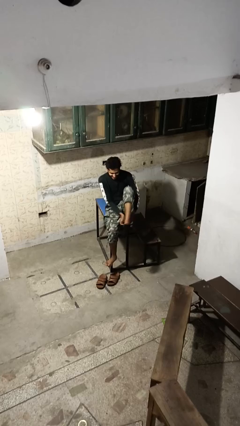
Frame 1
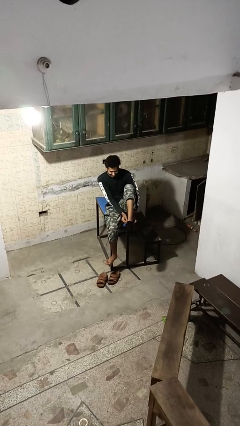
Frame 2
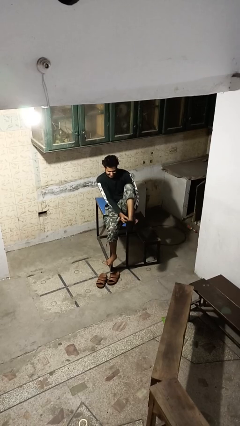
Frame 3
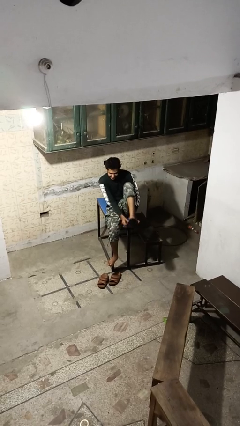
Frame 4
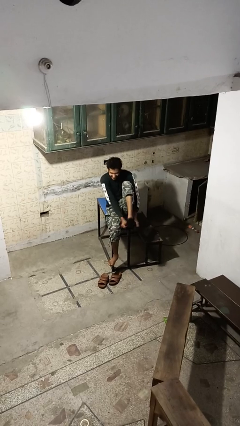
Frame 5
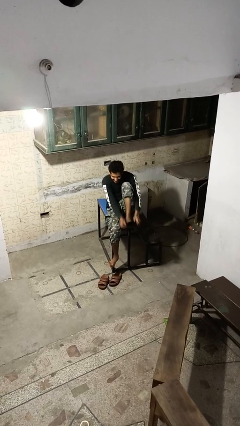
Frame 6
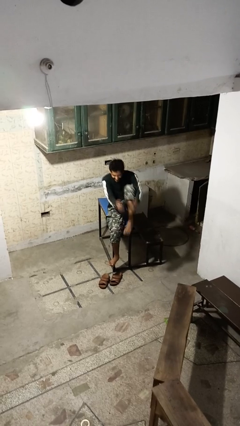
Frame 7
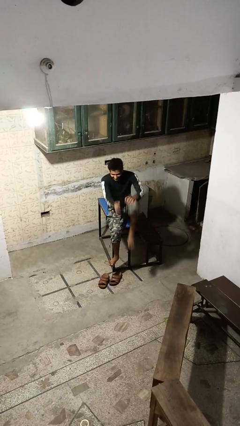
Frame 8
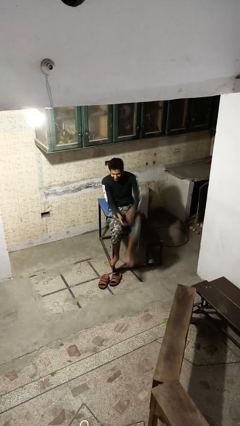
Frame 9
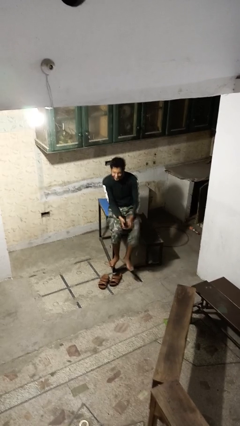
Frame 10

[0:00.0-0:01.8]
person takes off socks

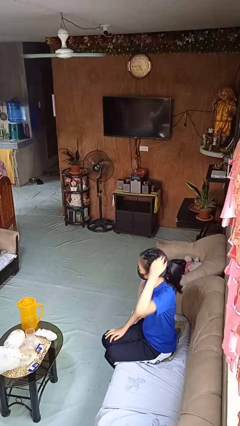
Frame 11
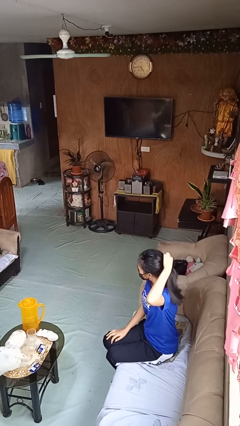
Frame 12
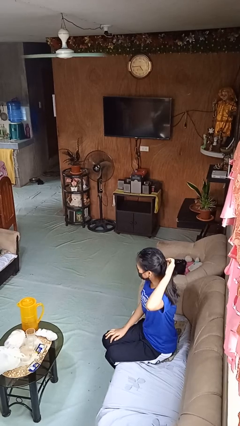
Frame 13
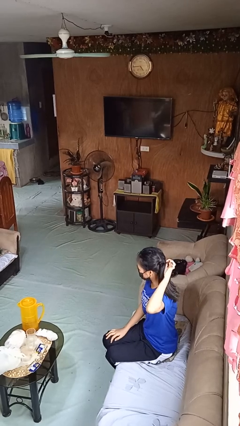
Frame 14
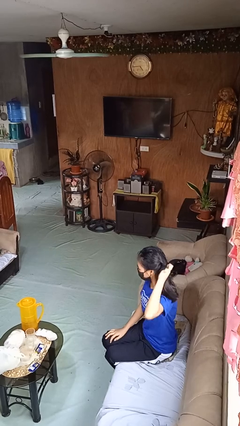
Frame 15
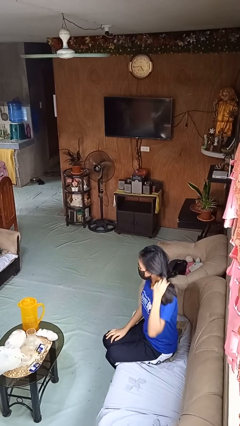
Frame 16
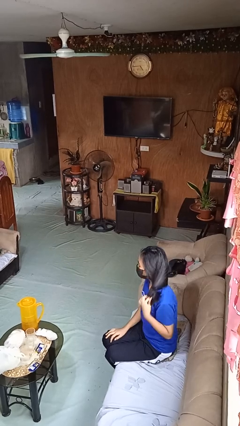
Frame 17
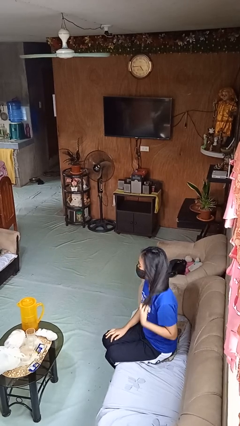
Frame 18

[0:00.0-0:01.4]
person takes off hairtie

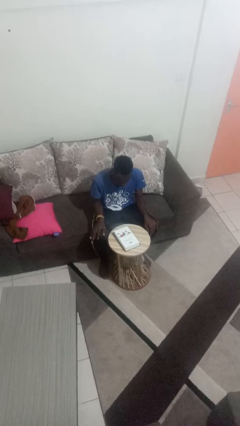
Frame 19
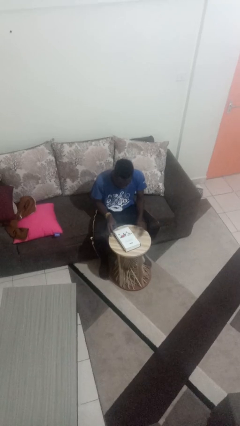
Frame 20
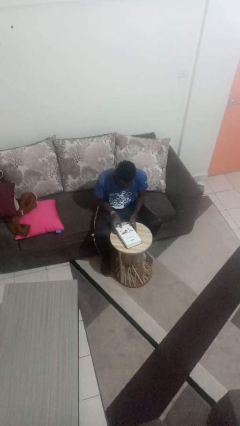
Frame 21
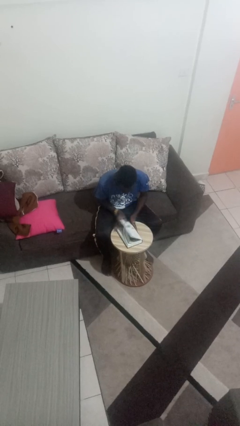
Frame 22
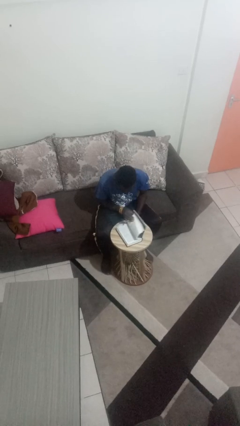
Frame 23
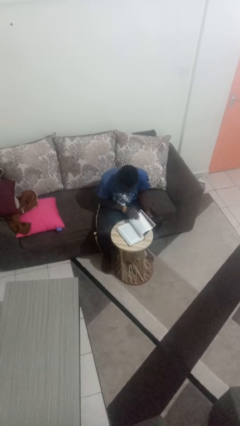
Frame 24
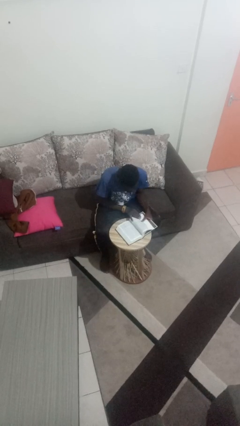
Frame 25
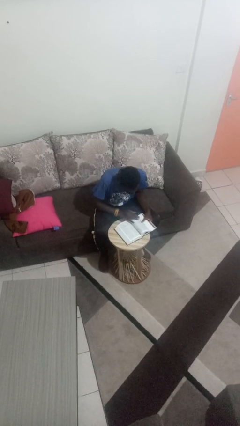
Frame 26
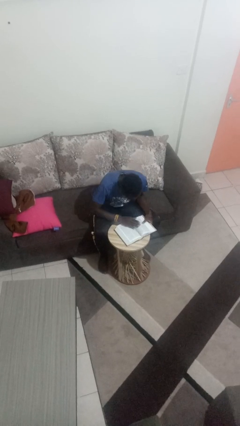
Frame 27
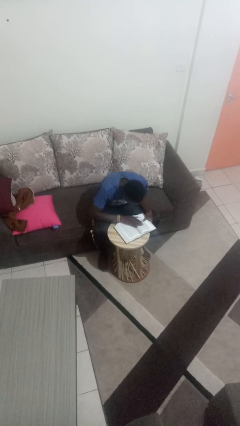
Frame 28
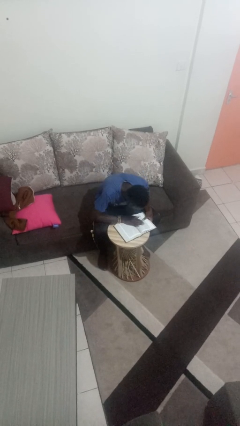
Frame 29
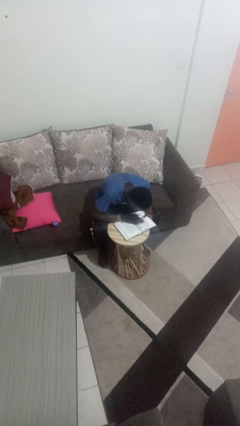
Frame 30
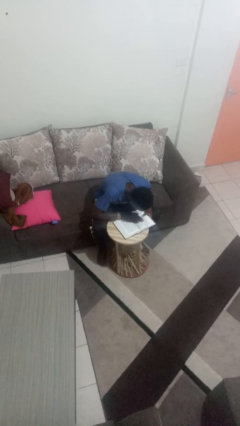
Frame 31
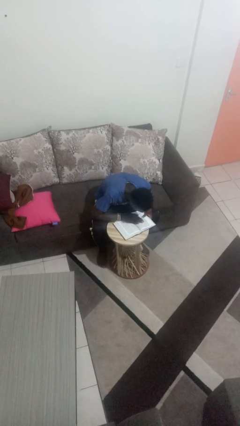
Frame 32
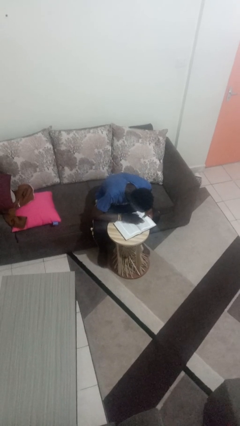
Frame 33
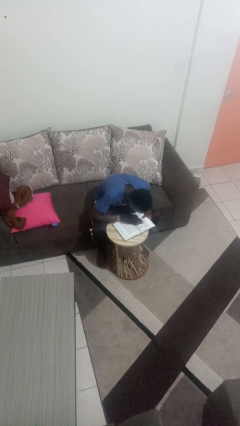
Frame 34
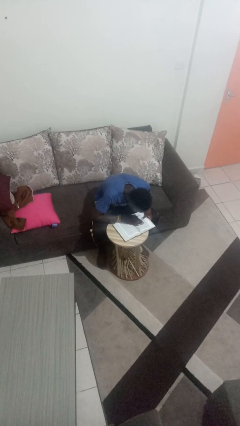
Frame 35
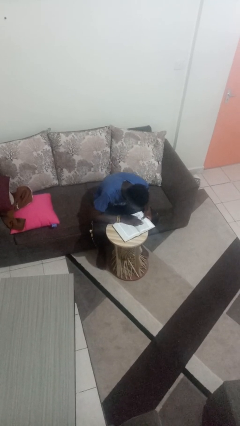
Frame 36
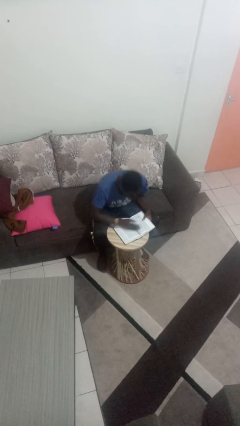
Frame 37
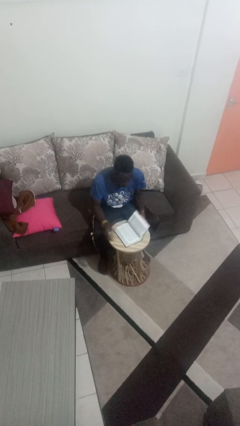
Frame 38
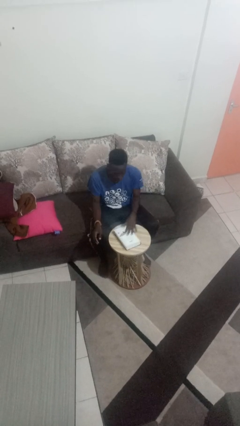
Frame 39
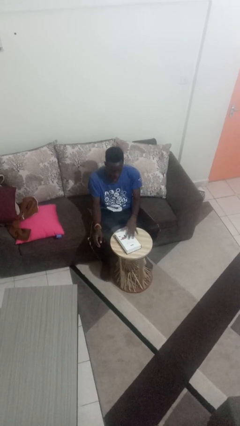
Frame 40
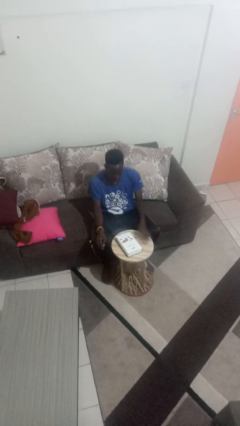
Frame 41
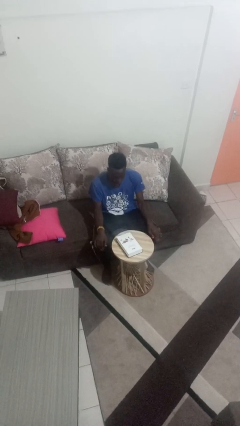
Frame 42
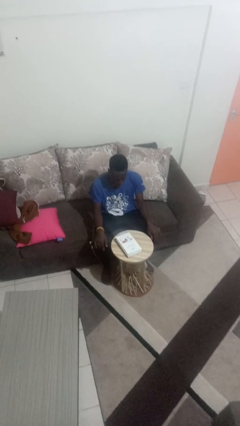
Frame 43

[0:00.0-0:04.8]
person reads book

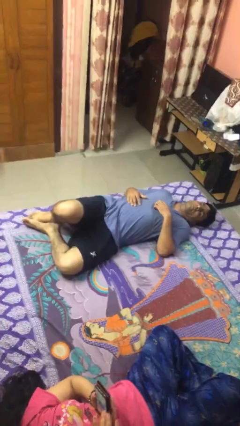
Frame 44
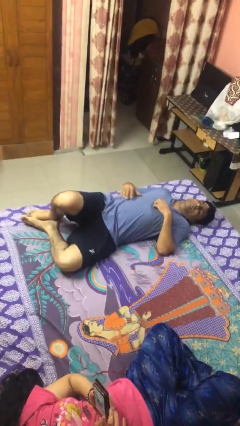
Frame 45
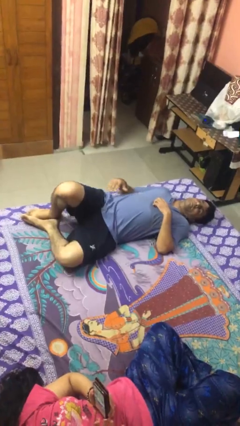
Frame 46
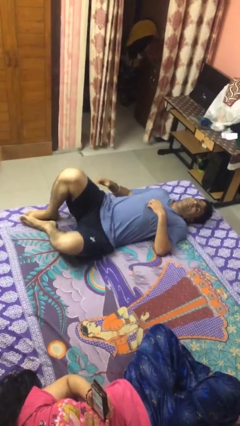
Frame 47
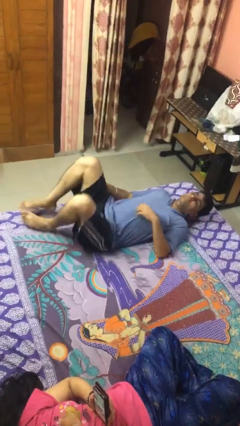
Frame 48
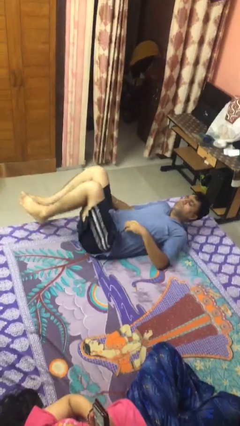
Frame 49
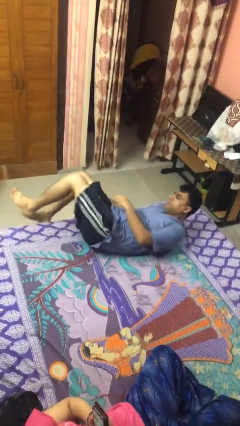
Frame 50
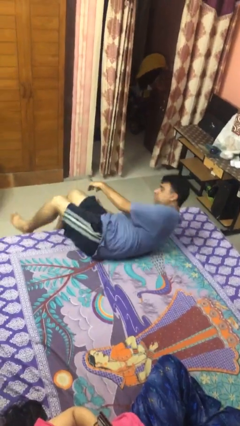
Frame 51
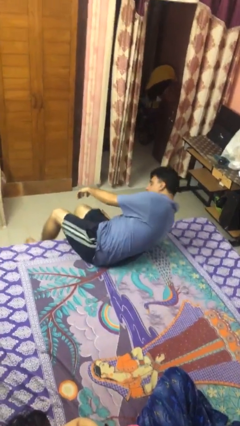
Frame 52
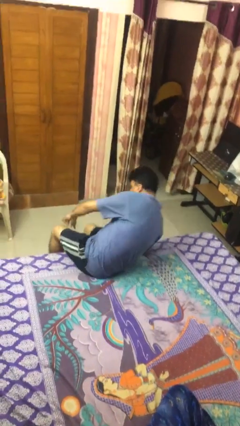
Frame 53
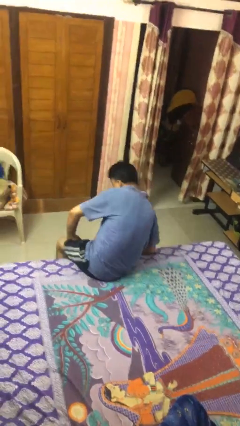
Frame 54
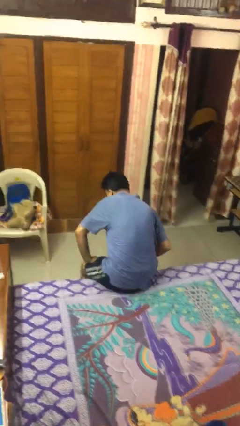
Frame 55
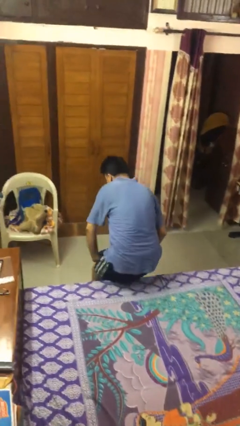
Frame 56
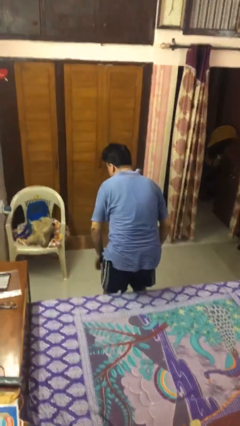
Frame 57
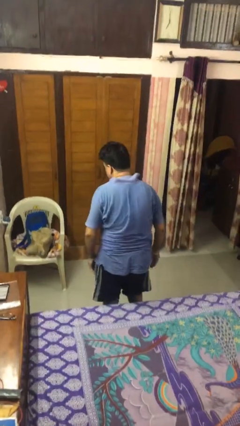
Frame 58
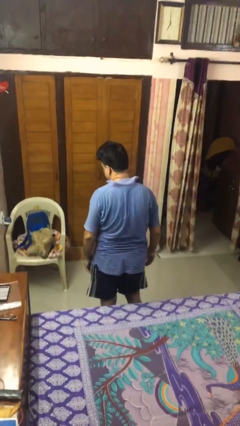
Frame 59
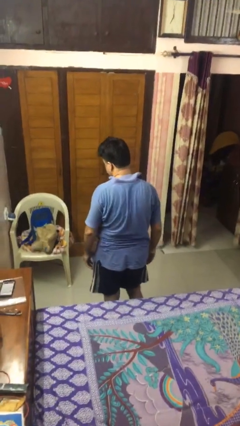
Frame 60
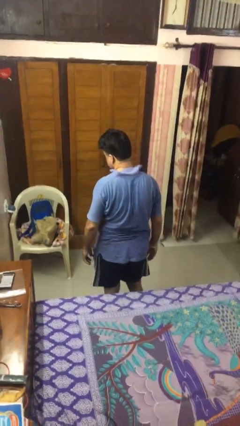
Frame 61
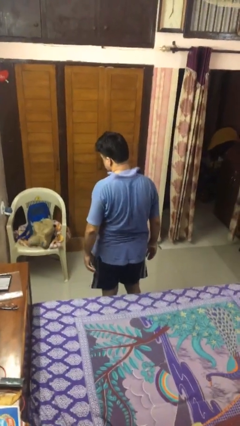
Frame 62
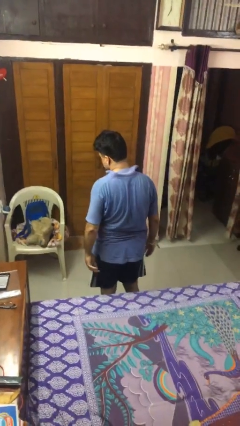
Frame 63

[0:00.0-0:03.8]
person stands up

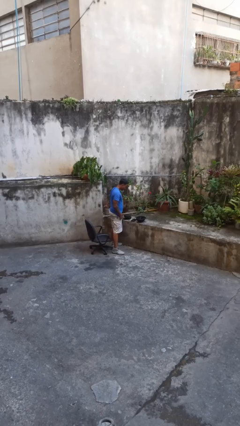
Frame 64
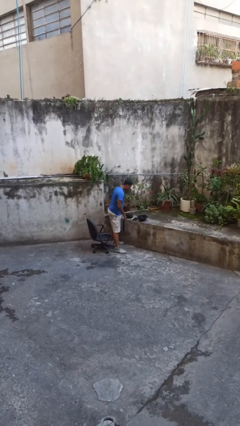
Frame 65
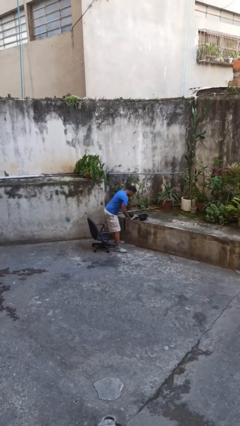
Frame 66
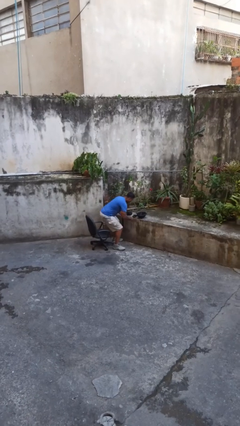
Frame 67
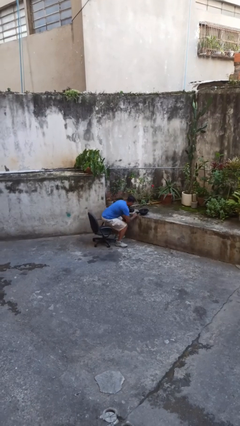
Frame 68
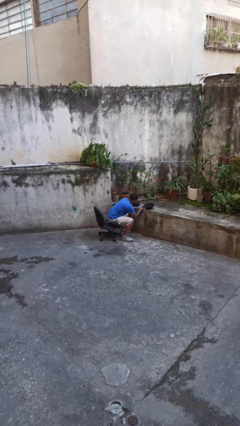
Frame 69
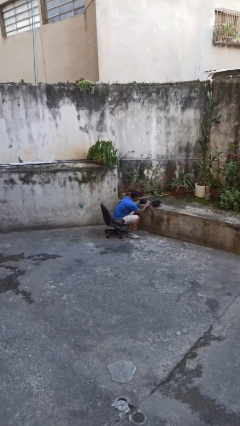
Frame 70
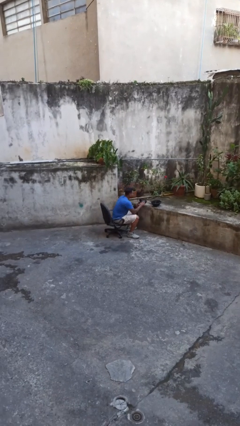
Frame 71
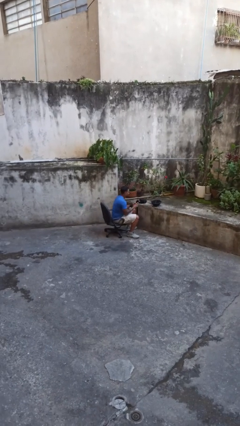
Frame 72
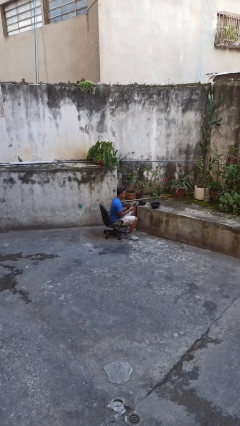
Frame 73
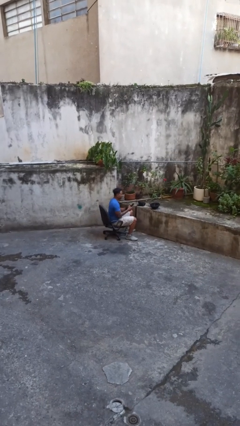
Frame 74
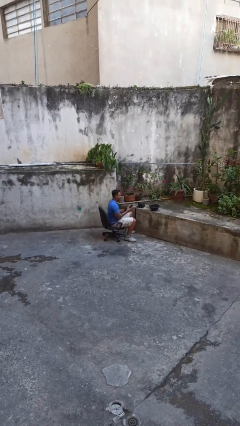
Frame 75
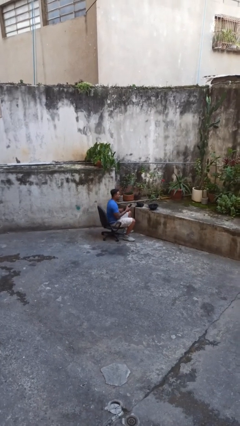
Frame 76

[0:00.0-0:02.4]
person sits down

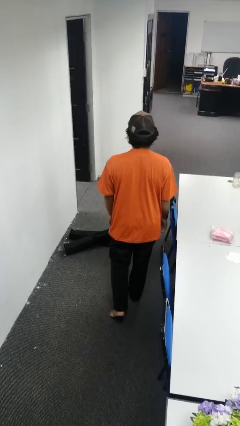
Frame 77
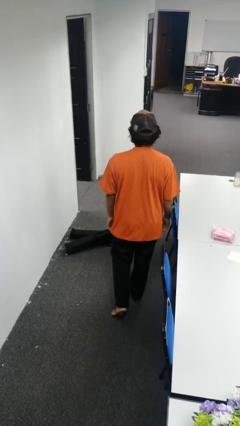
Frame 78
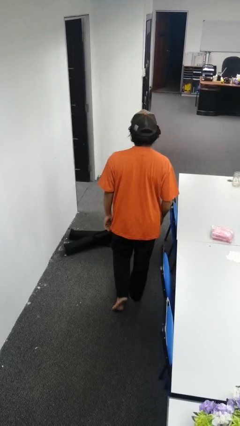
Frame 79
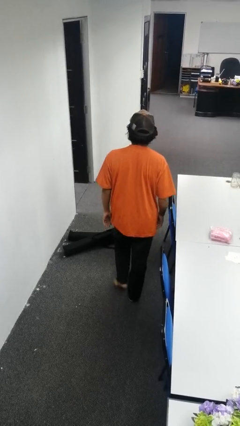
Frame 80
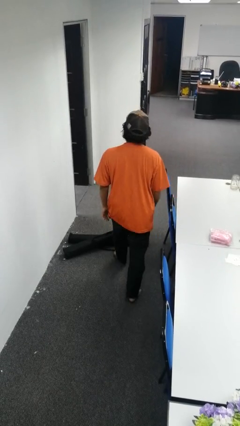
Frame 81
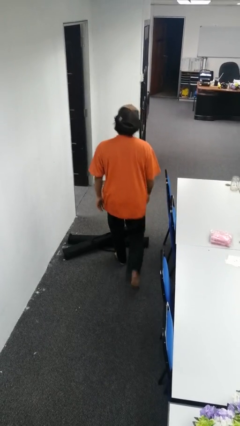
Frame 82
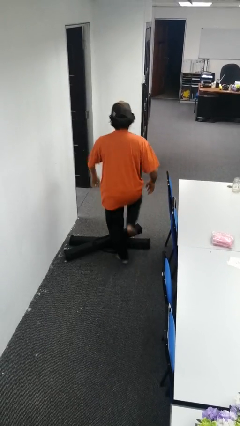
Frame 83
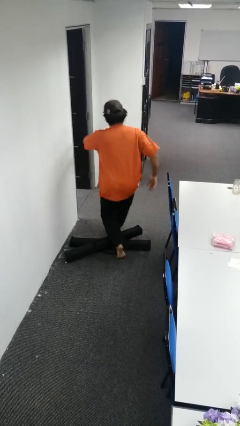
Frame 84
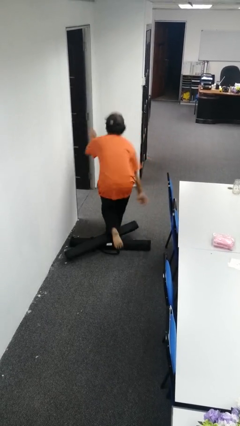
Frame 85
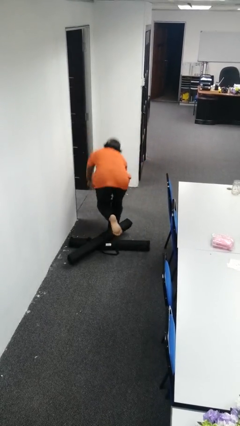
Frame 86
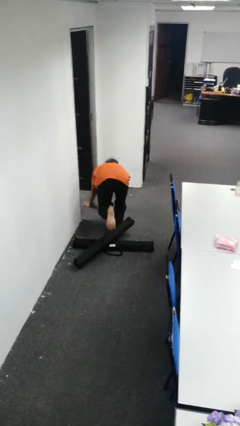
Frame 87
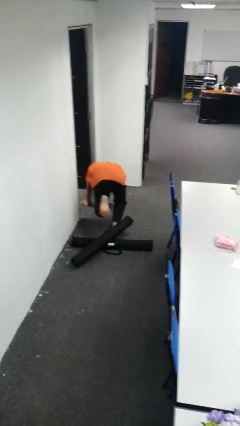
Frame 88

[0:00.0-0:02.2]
person trips on object on floor

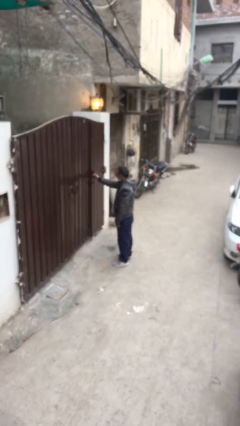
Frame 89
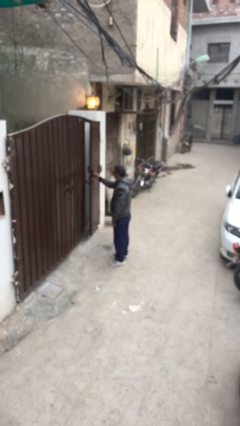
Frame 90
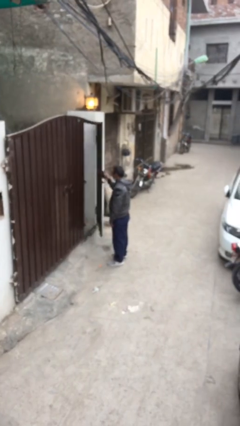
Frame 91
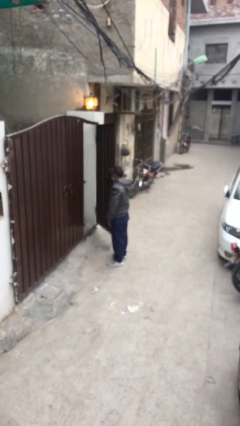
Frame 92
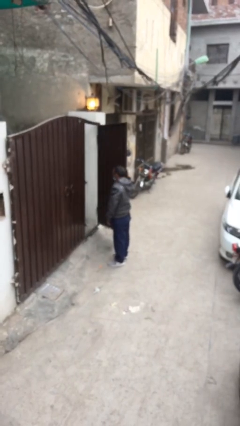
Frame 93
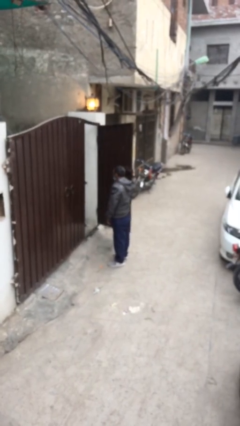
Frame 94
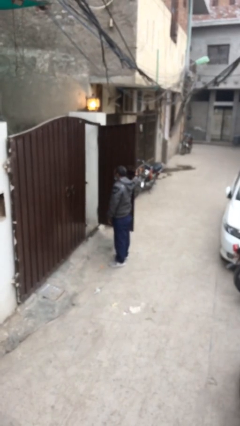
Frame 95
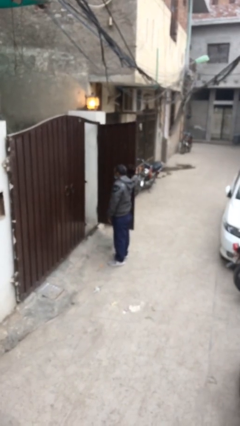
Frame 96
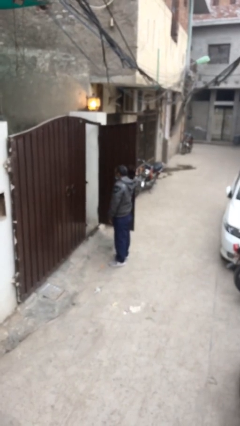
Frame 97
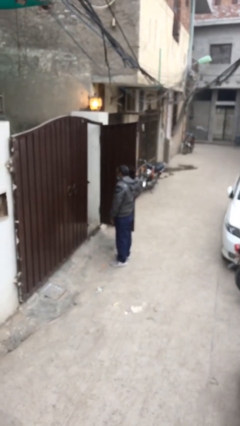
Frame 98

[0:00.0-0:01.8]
person opens facility door
